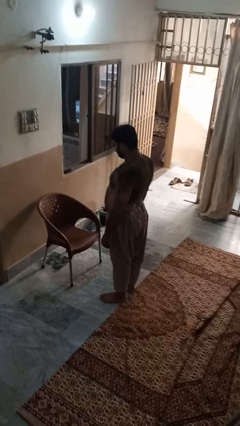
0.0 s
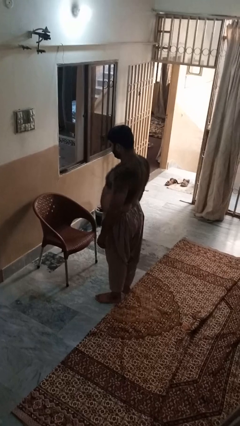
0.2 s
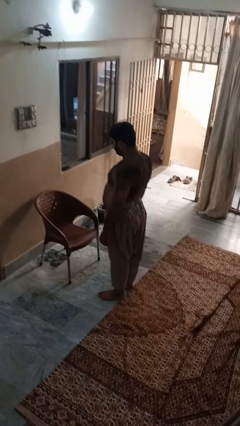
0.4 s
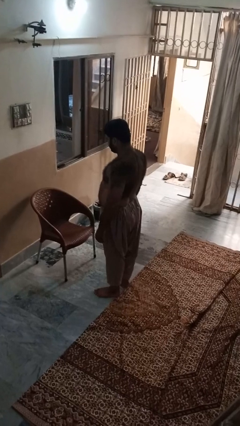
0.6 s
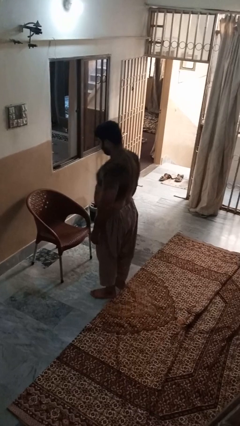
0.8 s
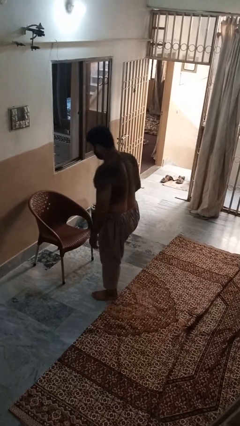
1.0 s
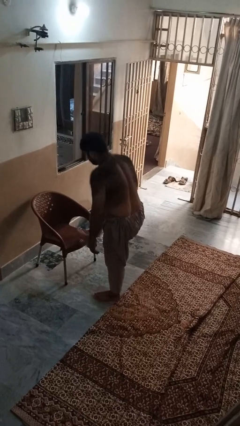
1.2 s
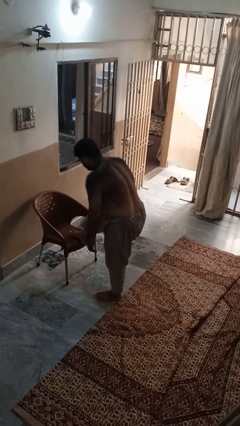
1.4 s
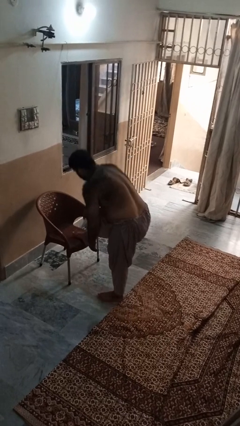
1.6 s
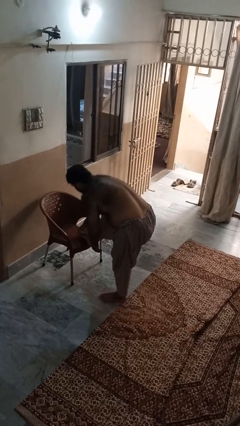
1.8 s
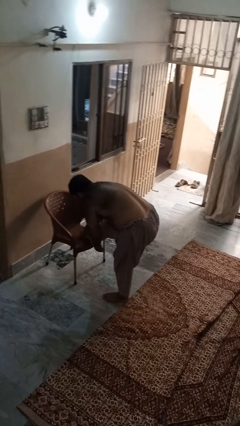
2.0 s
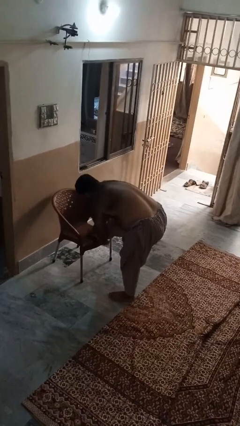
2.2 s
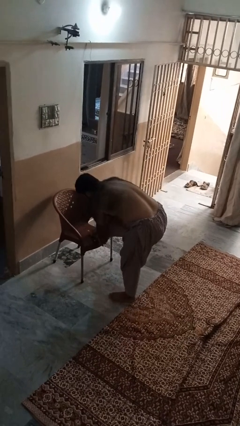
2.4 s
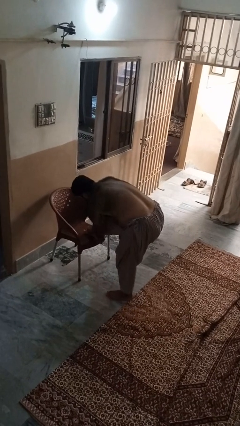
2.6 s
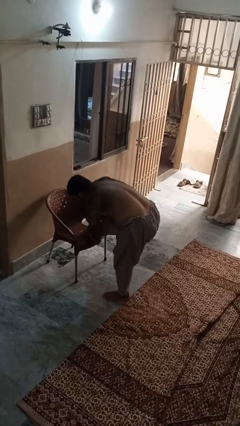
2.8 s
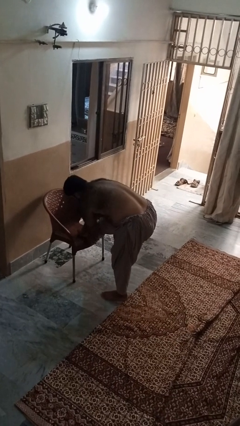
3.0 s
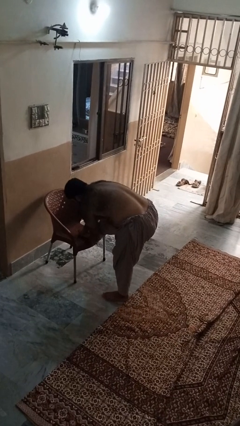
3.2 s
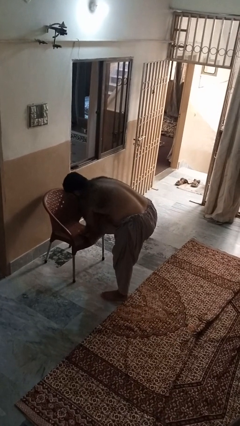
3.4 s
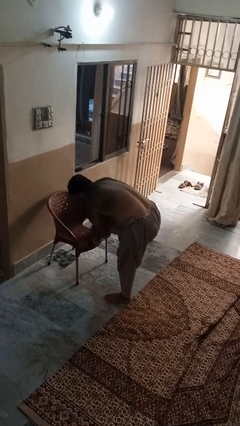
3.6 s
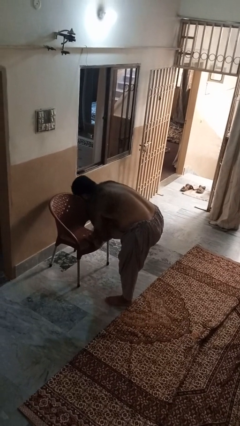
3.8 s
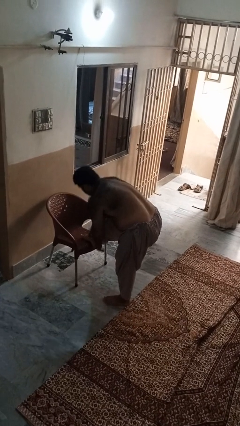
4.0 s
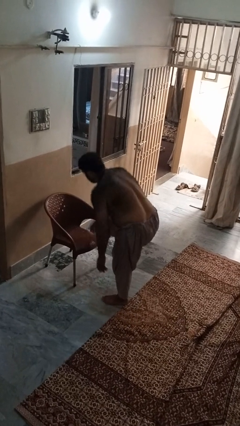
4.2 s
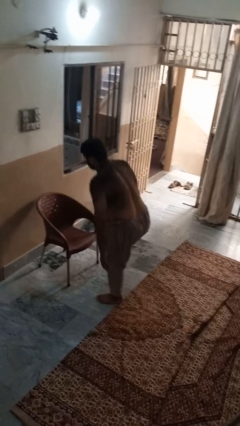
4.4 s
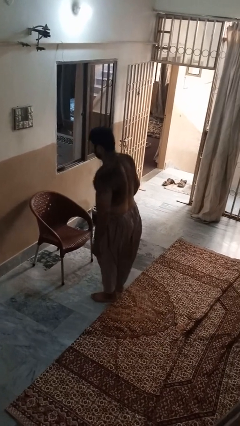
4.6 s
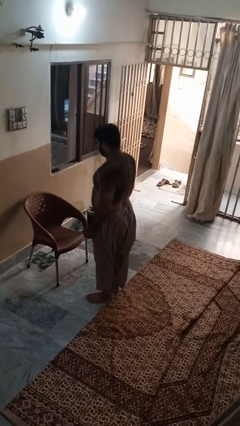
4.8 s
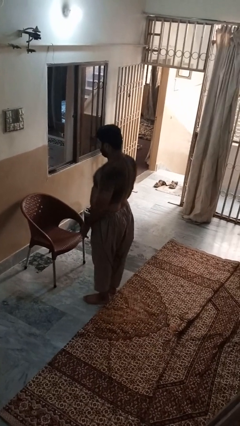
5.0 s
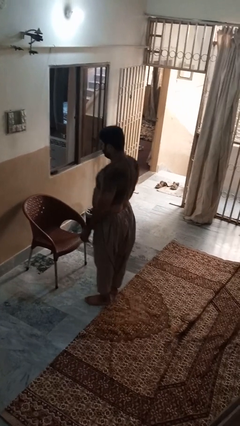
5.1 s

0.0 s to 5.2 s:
person stubs toe

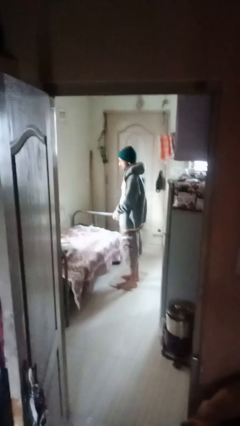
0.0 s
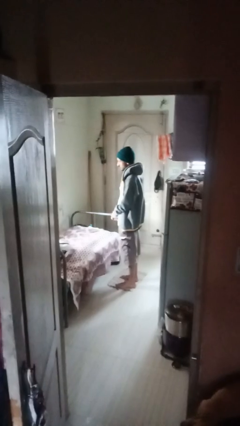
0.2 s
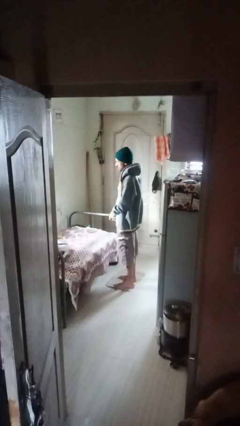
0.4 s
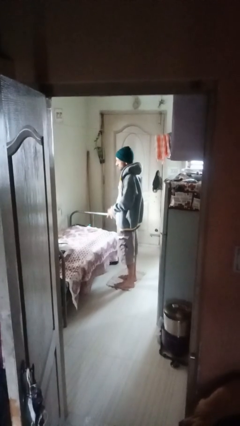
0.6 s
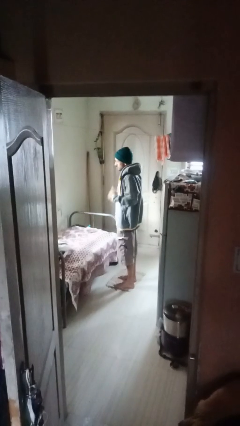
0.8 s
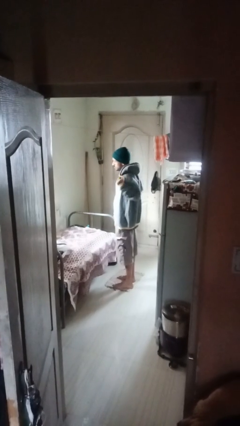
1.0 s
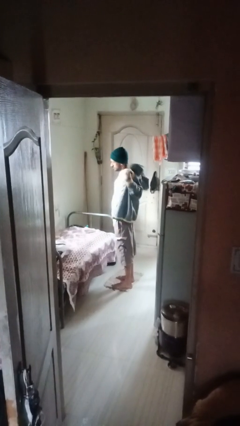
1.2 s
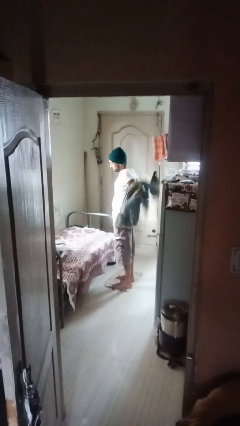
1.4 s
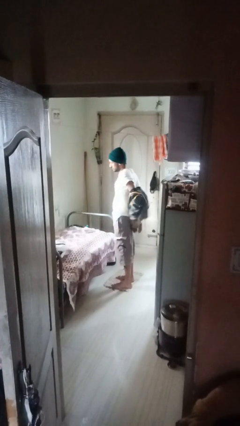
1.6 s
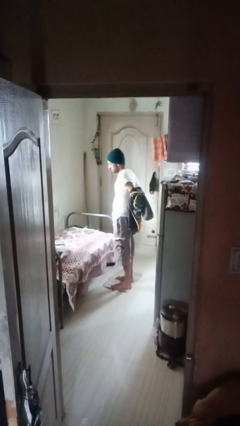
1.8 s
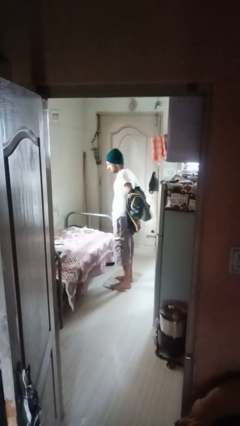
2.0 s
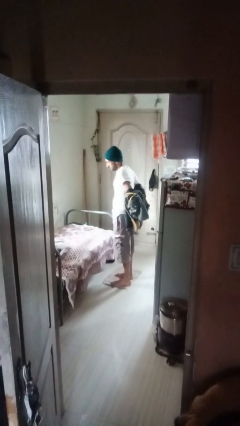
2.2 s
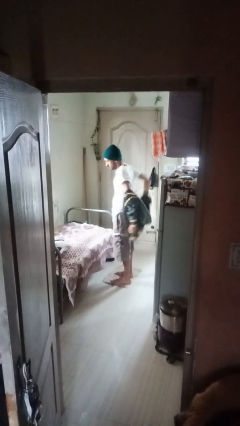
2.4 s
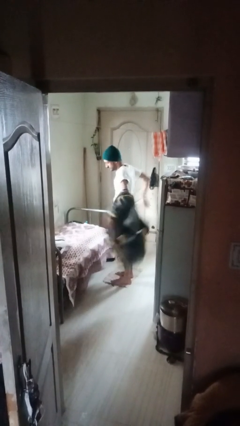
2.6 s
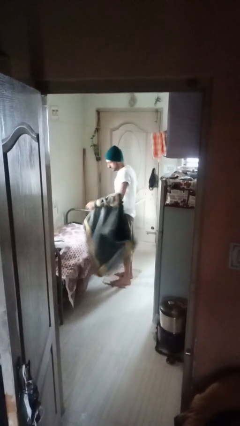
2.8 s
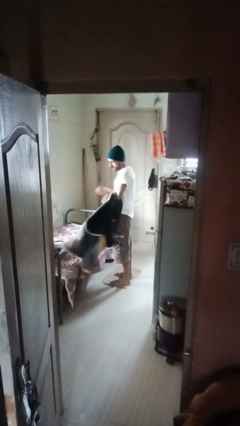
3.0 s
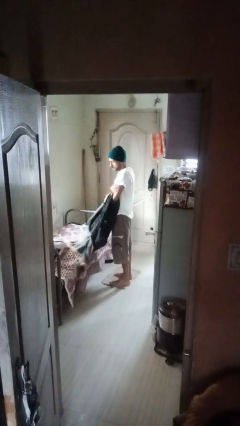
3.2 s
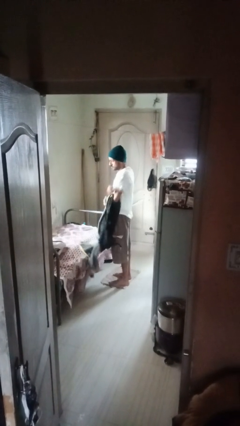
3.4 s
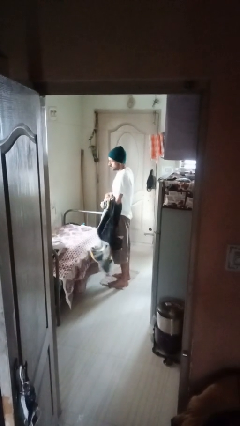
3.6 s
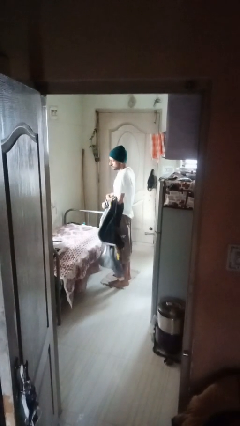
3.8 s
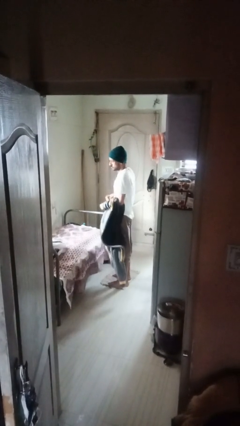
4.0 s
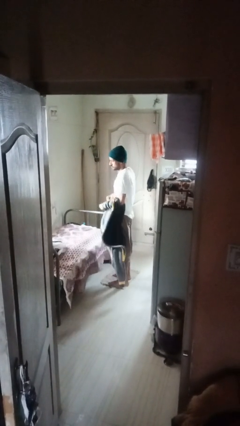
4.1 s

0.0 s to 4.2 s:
person takes off shirt

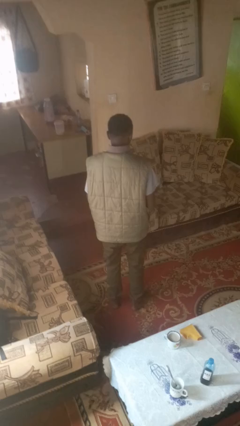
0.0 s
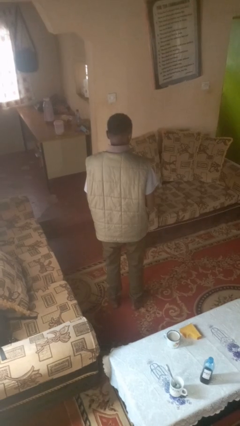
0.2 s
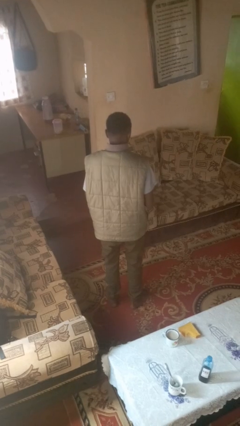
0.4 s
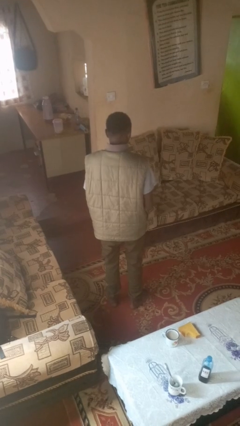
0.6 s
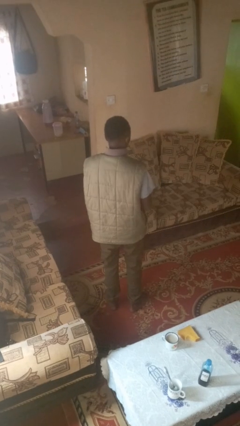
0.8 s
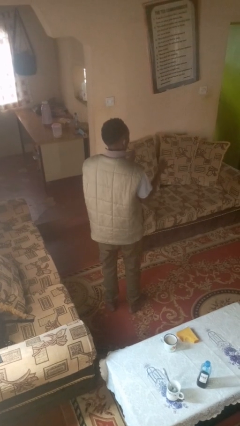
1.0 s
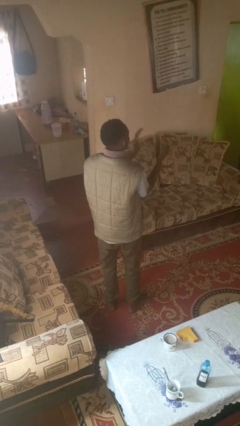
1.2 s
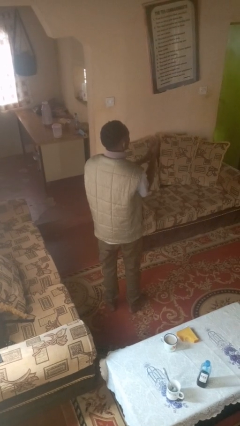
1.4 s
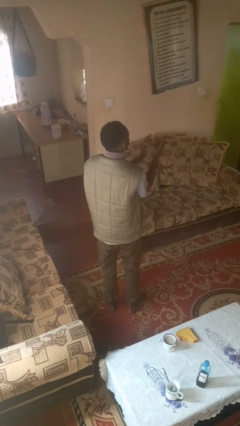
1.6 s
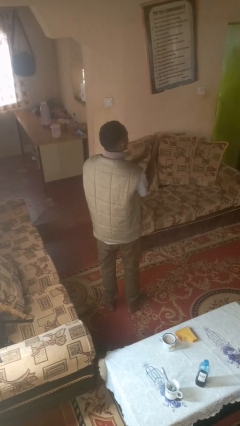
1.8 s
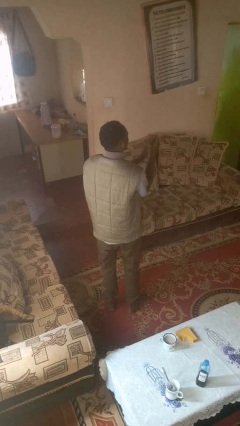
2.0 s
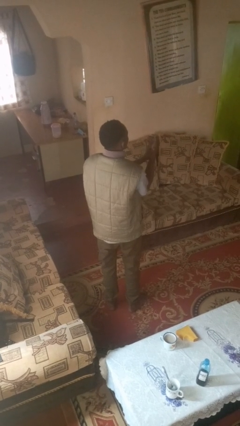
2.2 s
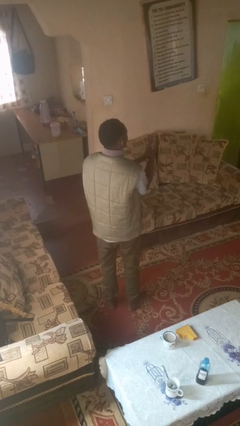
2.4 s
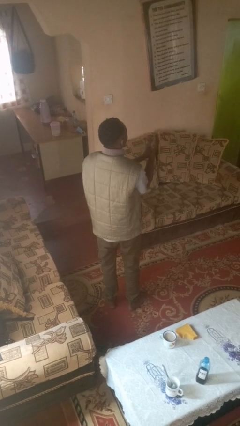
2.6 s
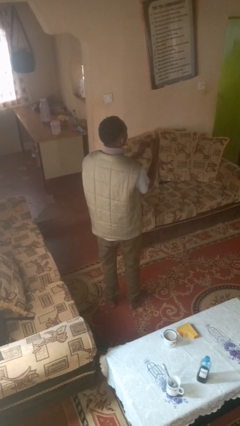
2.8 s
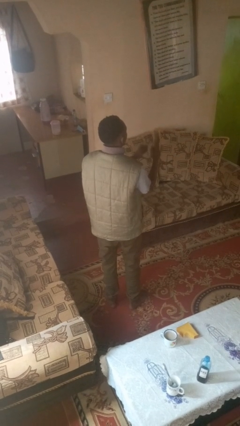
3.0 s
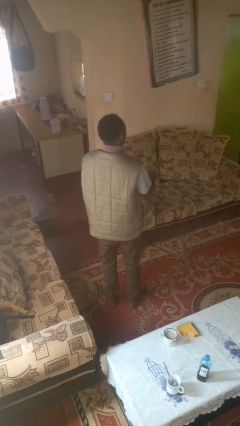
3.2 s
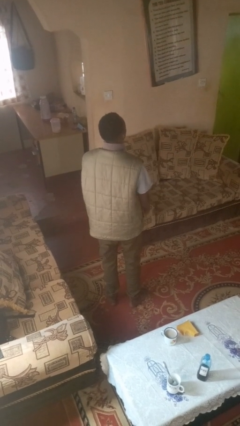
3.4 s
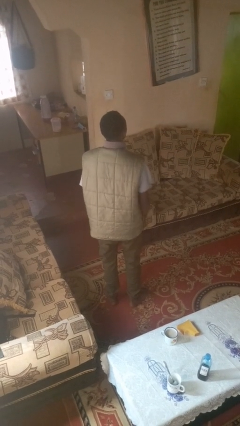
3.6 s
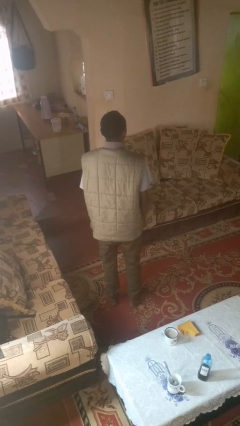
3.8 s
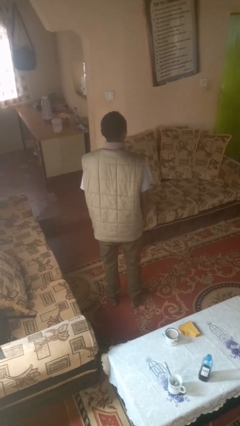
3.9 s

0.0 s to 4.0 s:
person claps hands

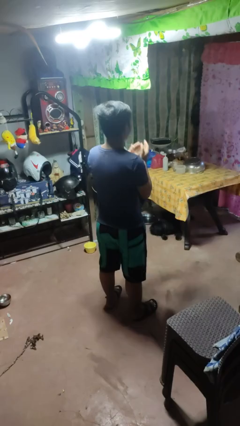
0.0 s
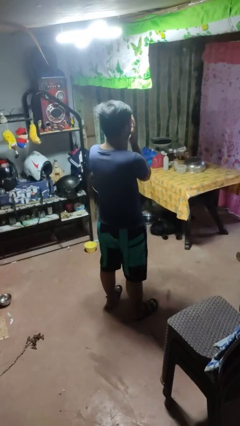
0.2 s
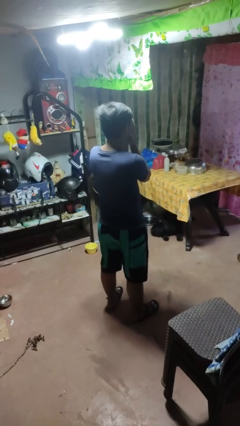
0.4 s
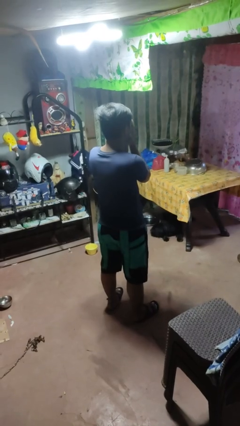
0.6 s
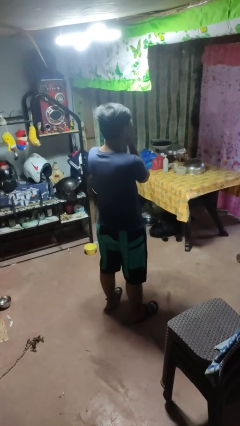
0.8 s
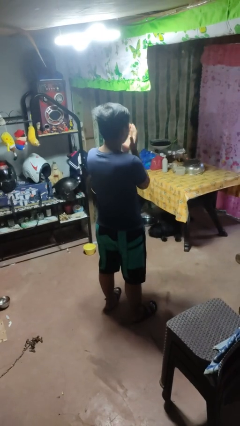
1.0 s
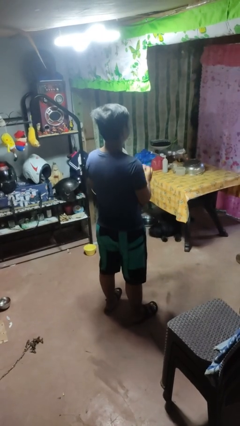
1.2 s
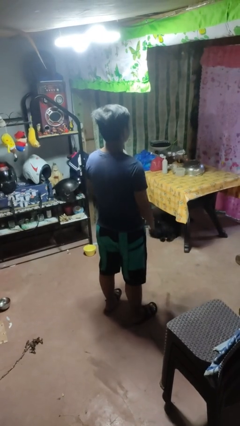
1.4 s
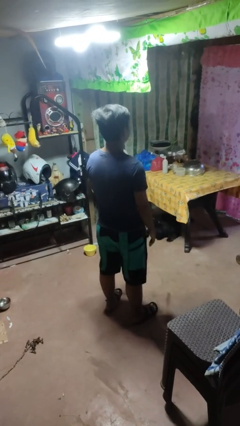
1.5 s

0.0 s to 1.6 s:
person covers face with hands

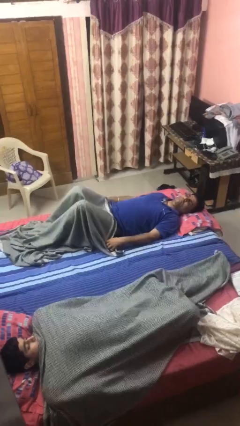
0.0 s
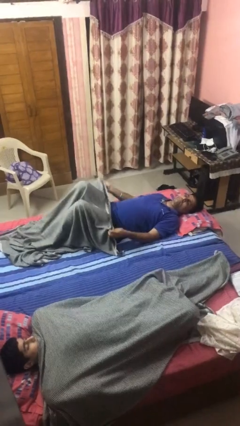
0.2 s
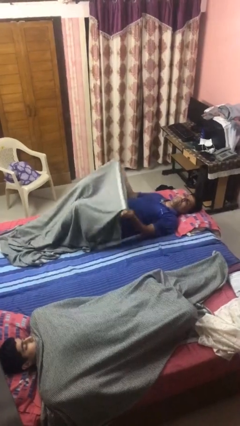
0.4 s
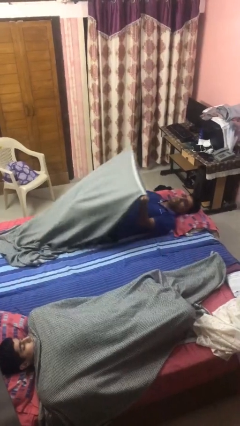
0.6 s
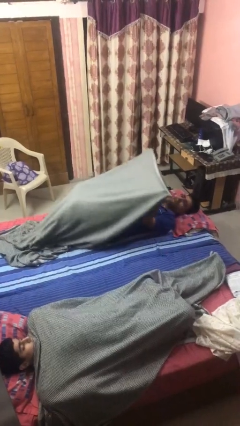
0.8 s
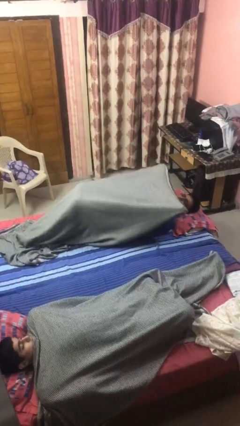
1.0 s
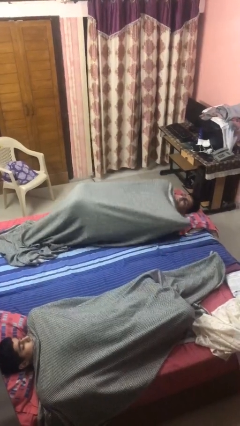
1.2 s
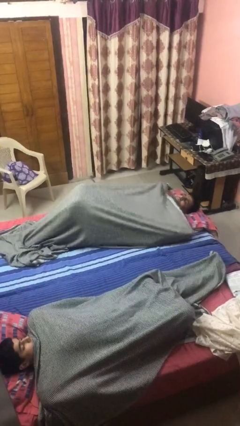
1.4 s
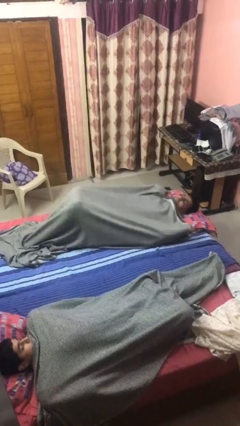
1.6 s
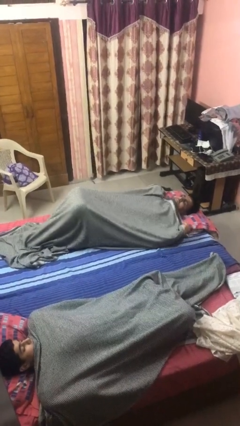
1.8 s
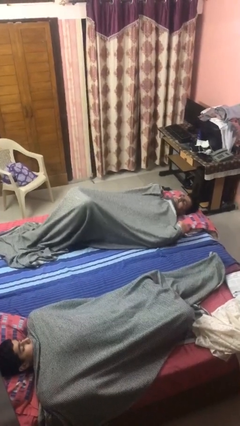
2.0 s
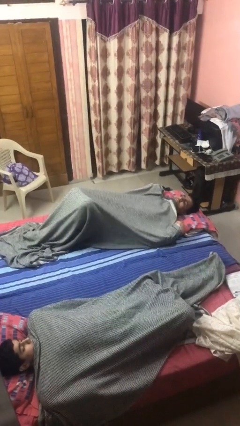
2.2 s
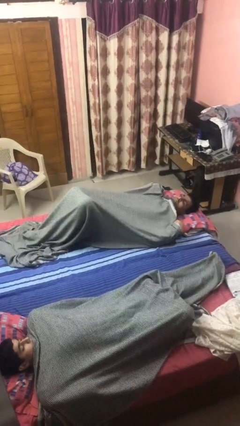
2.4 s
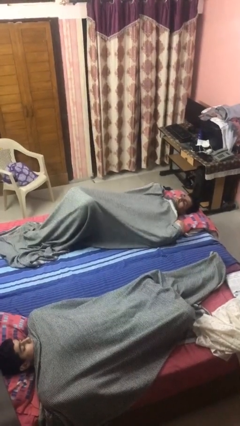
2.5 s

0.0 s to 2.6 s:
person covers with bedsheets
